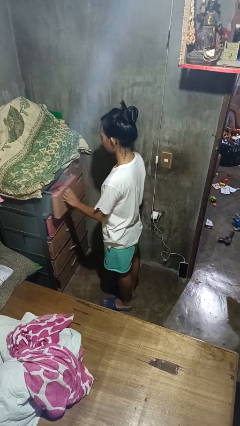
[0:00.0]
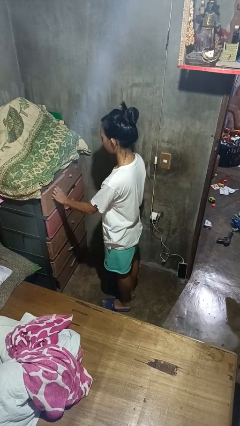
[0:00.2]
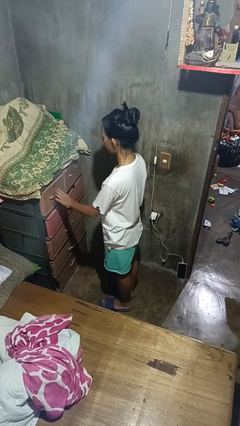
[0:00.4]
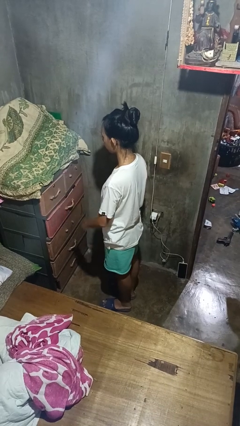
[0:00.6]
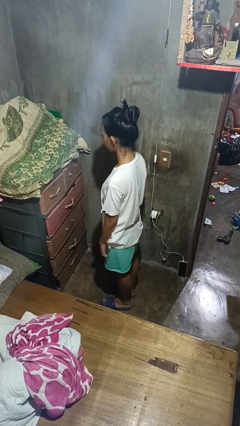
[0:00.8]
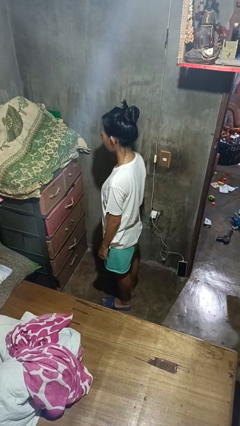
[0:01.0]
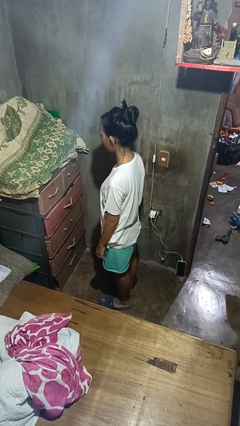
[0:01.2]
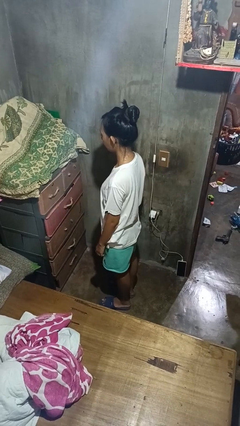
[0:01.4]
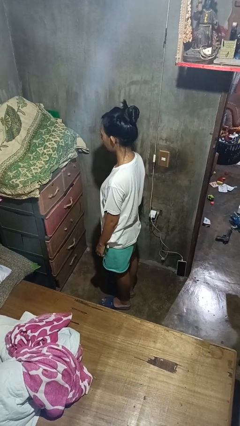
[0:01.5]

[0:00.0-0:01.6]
person closes dresser drawer

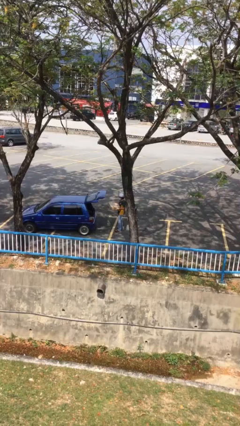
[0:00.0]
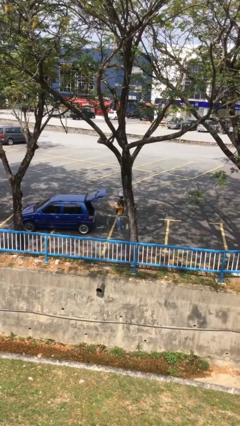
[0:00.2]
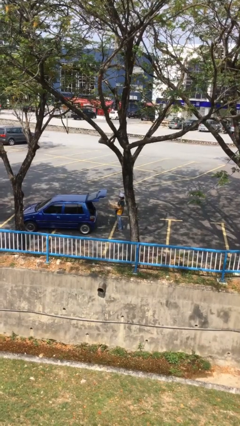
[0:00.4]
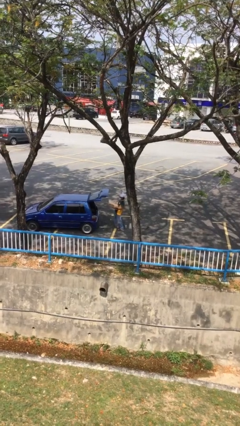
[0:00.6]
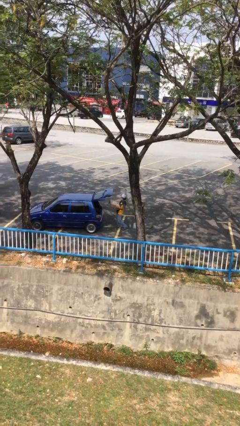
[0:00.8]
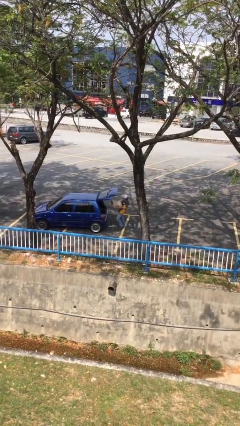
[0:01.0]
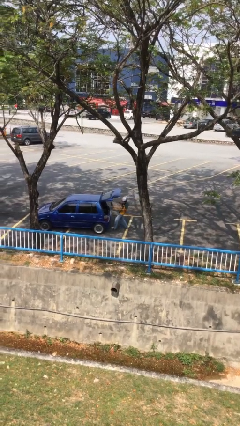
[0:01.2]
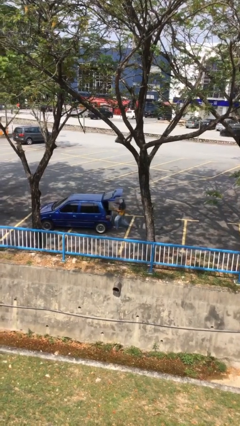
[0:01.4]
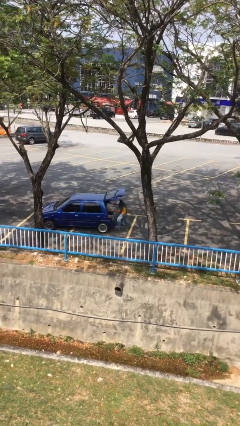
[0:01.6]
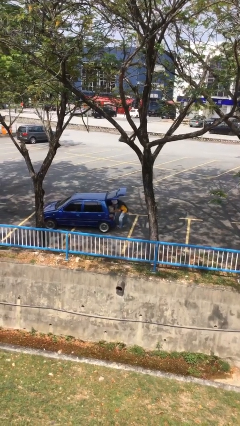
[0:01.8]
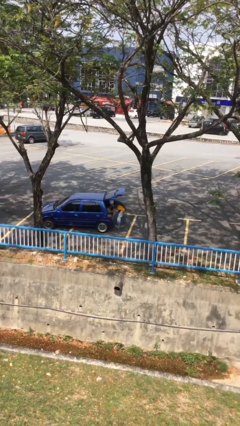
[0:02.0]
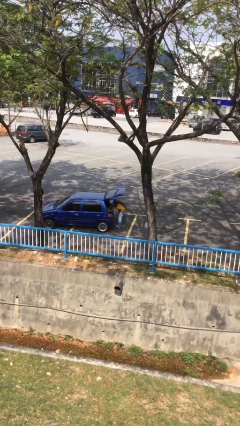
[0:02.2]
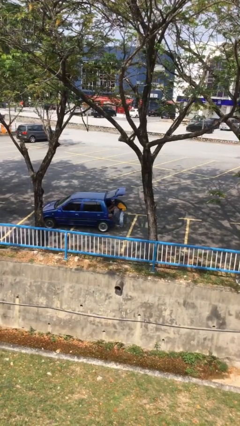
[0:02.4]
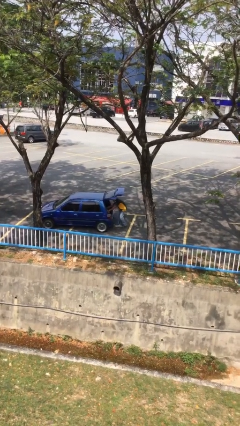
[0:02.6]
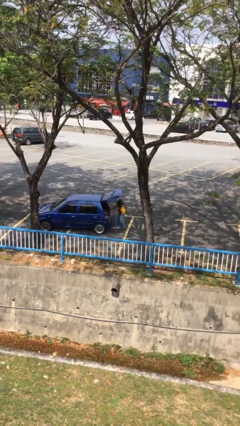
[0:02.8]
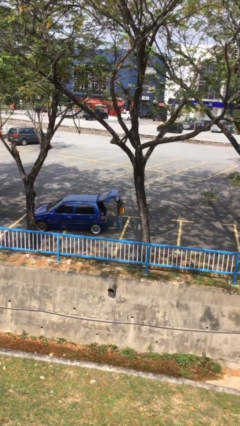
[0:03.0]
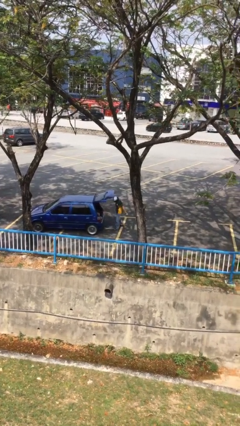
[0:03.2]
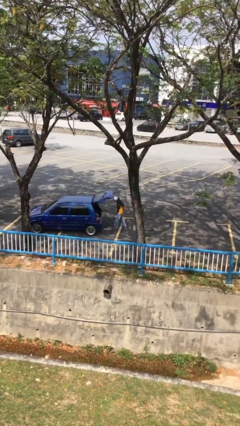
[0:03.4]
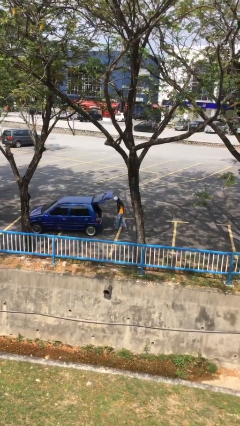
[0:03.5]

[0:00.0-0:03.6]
person loads car

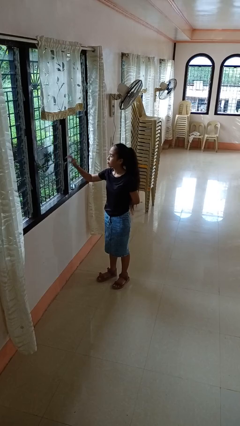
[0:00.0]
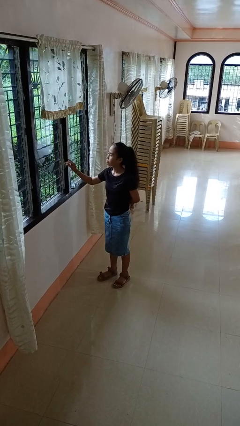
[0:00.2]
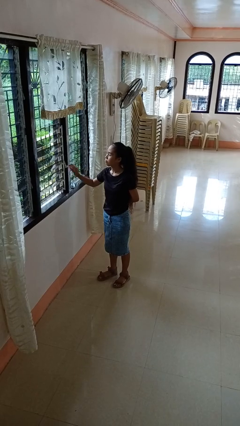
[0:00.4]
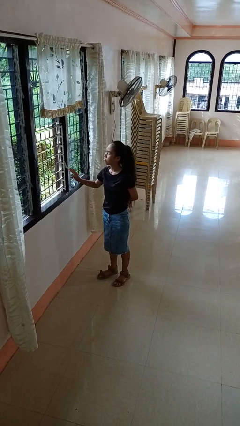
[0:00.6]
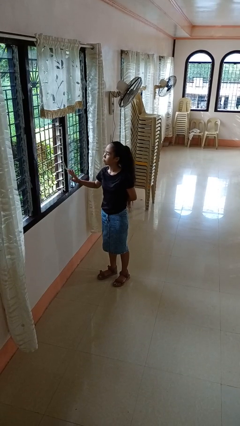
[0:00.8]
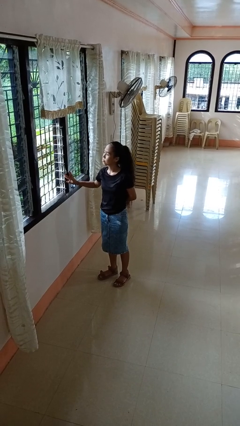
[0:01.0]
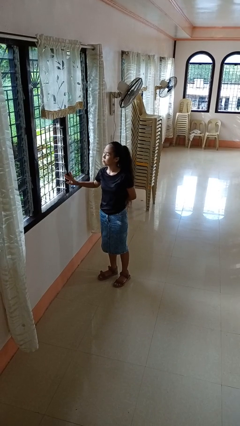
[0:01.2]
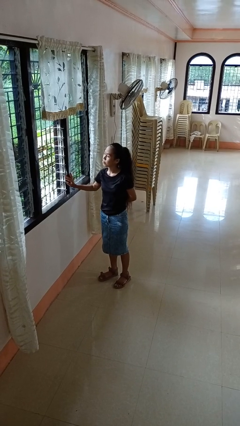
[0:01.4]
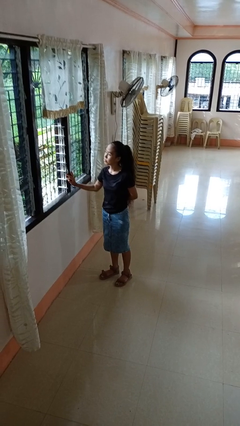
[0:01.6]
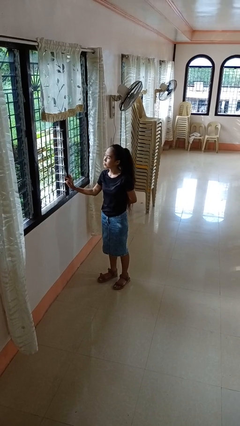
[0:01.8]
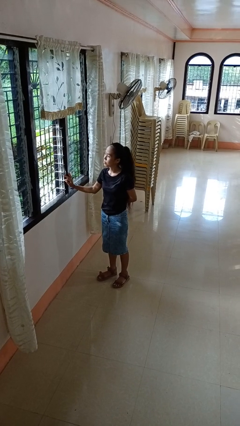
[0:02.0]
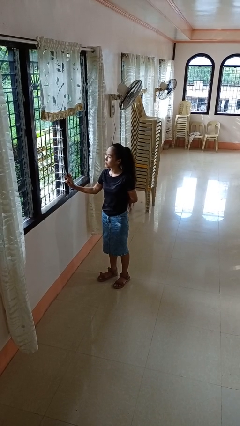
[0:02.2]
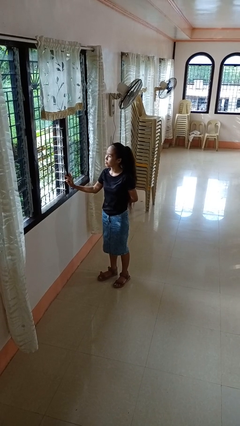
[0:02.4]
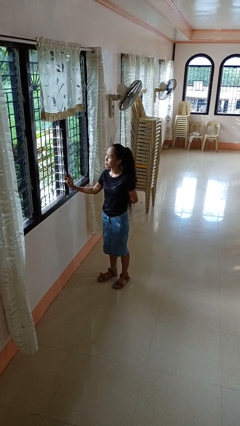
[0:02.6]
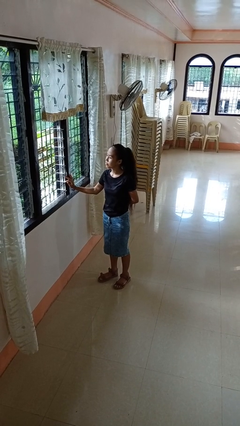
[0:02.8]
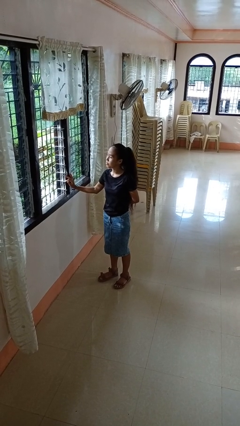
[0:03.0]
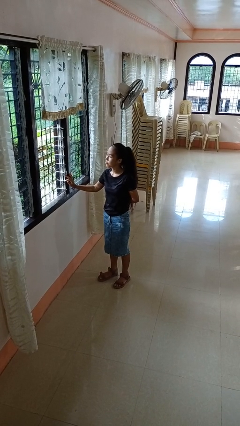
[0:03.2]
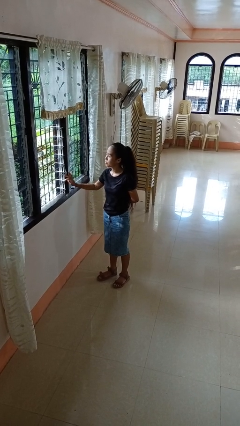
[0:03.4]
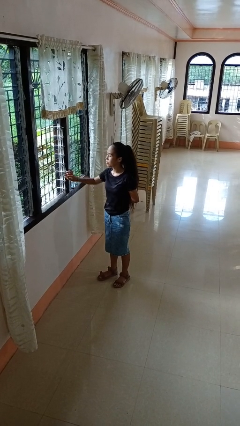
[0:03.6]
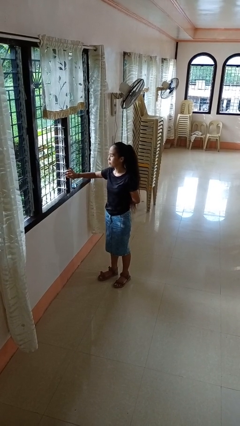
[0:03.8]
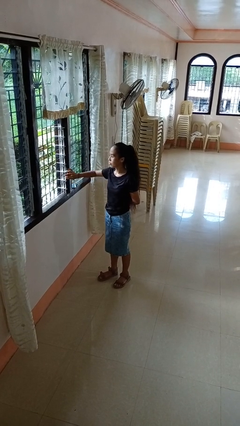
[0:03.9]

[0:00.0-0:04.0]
person opens home window

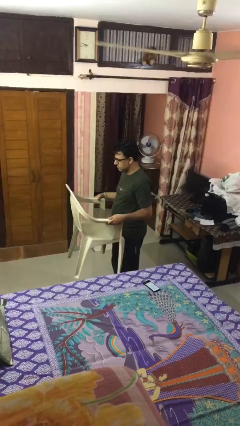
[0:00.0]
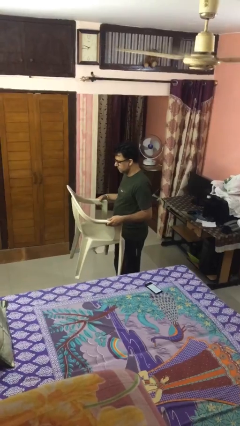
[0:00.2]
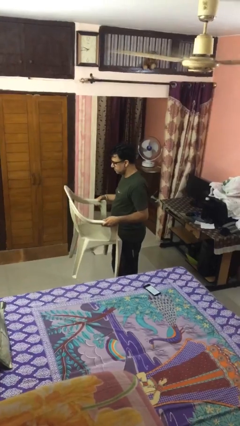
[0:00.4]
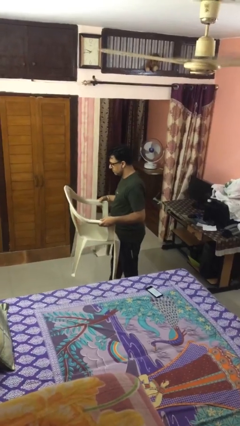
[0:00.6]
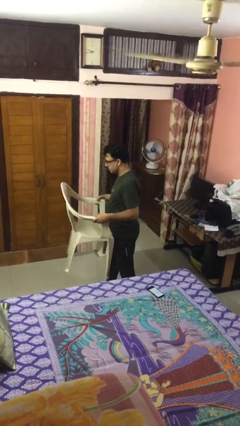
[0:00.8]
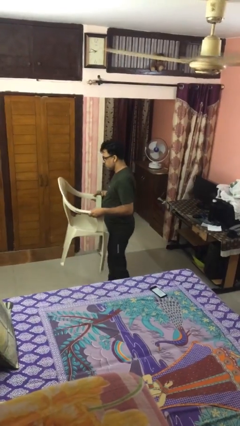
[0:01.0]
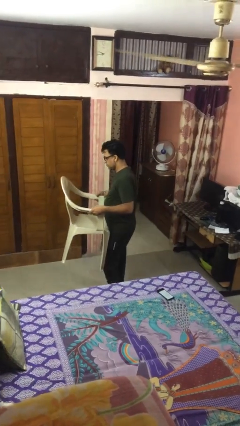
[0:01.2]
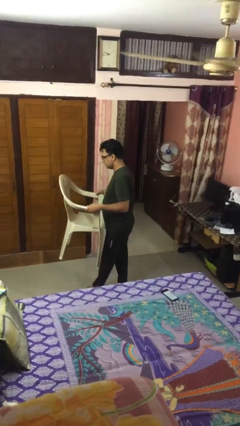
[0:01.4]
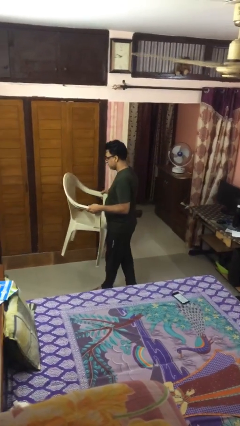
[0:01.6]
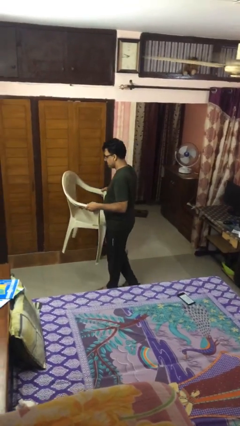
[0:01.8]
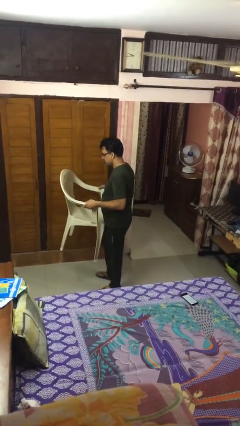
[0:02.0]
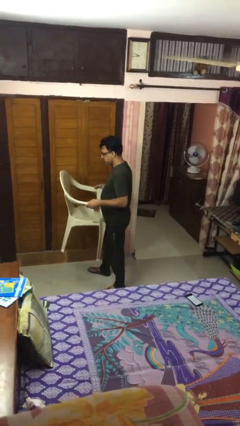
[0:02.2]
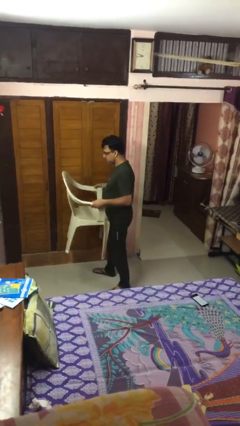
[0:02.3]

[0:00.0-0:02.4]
person carries furniture

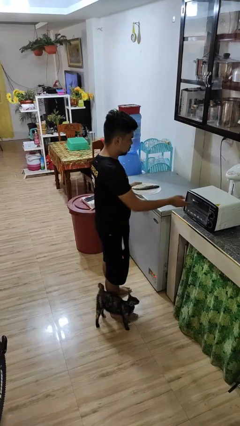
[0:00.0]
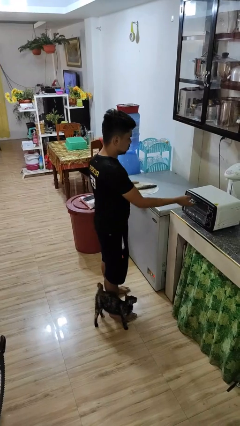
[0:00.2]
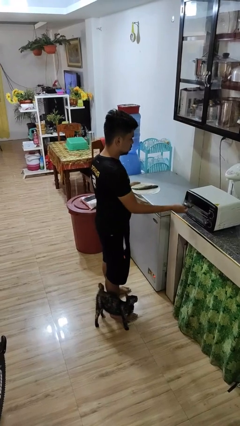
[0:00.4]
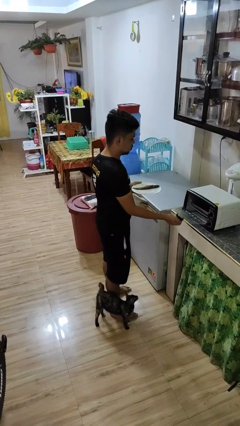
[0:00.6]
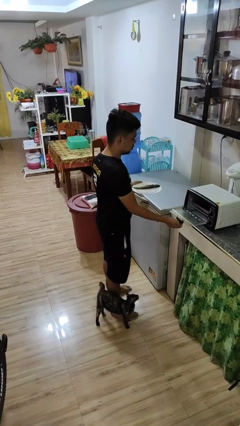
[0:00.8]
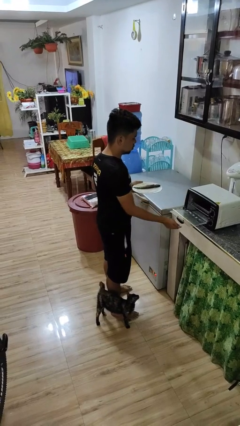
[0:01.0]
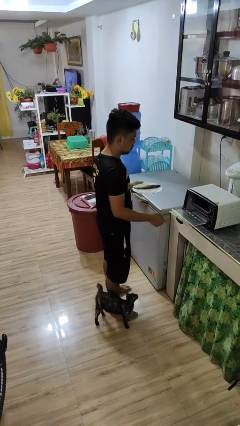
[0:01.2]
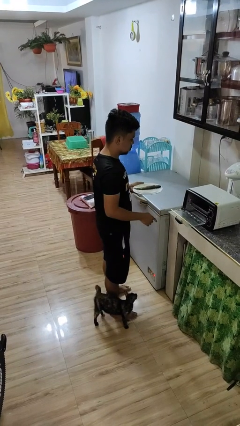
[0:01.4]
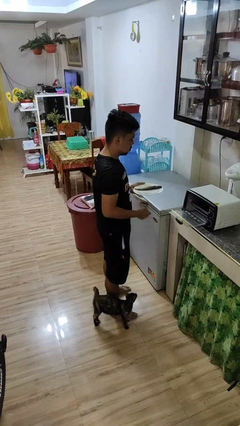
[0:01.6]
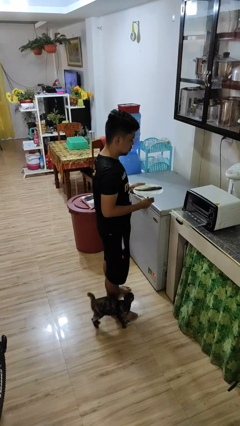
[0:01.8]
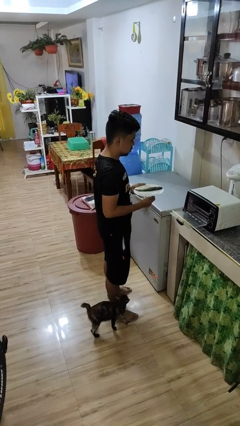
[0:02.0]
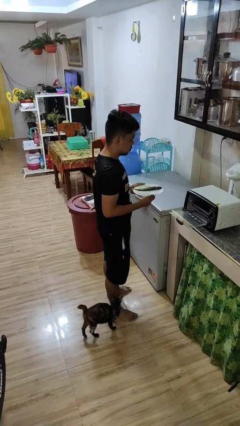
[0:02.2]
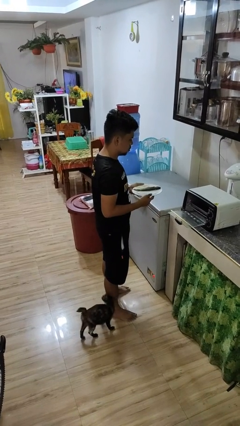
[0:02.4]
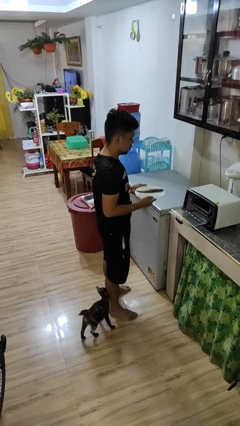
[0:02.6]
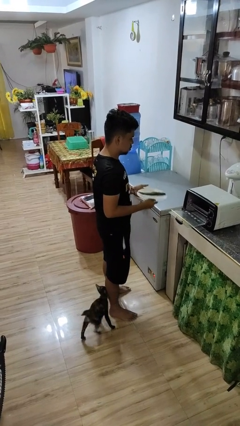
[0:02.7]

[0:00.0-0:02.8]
person opens microwave

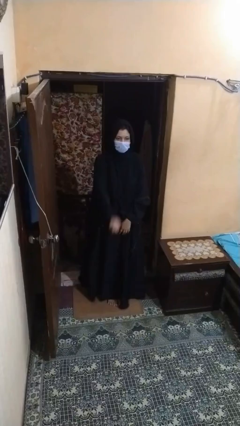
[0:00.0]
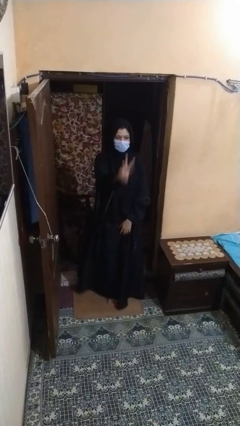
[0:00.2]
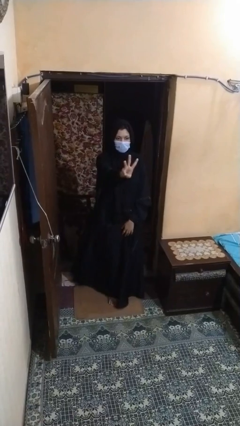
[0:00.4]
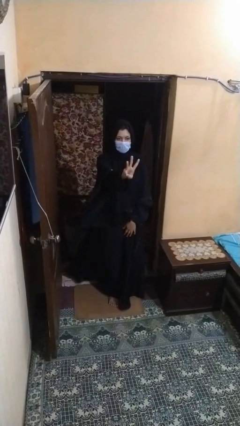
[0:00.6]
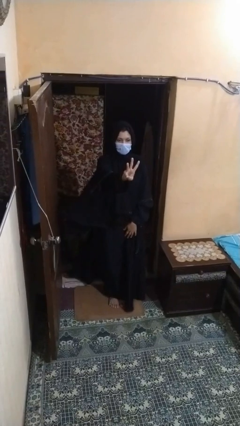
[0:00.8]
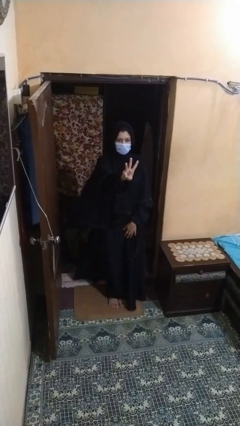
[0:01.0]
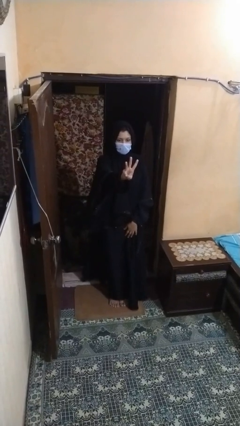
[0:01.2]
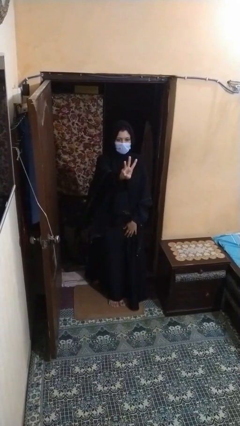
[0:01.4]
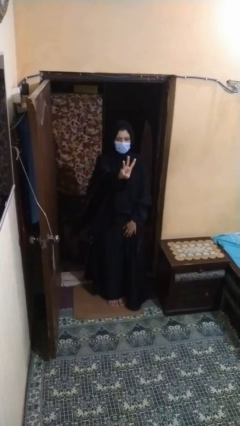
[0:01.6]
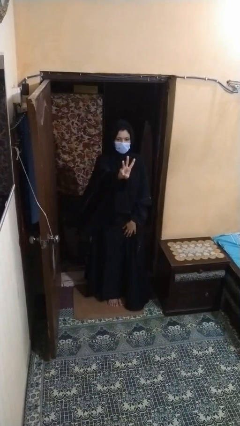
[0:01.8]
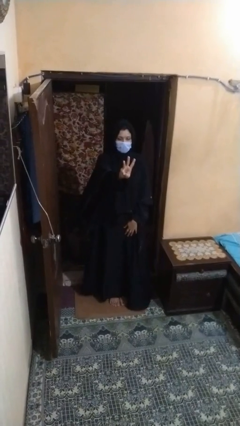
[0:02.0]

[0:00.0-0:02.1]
person gestures number three

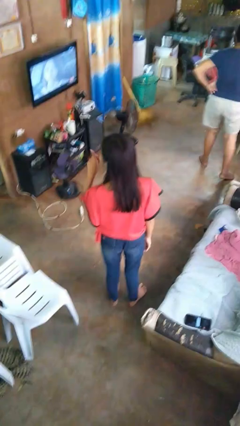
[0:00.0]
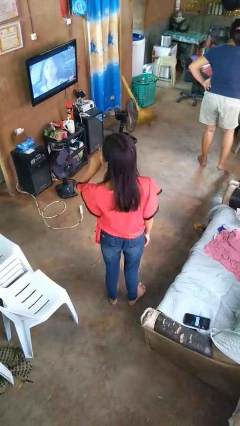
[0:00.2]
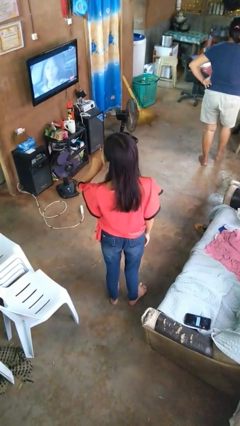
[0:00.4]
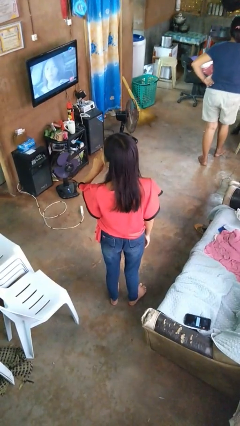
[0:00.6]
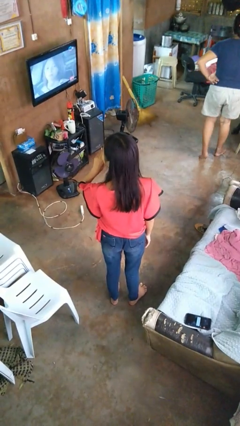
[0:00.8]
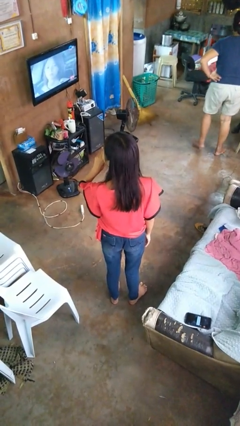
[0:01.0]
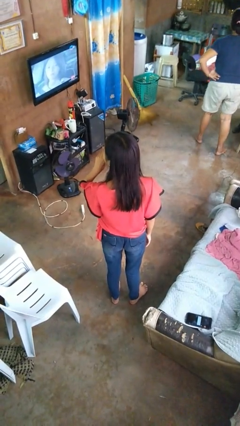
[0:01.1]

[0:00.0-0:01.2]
person gestures be quiet
